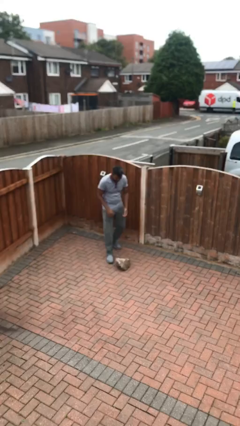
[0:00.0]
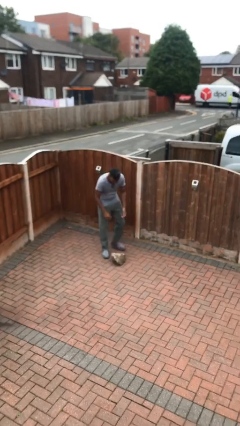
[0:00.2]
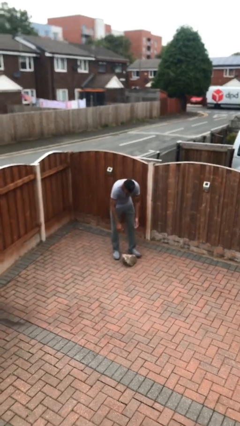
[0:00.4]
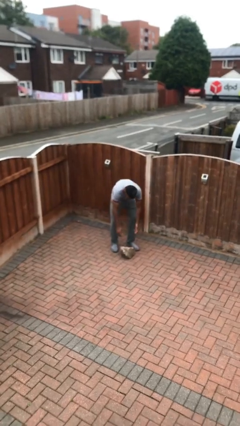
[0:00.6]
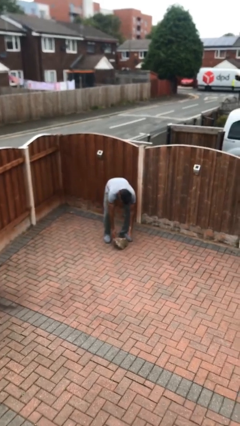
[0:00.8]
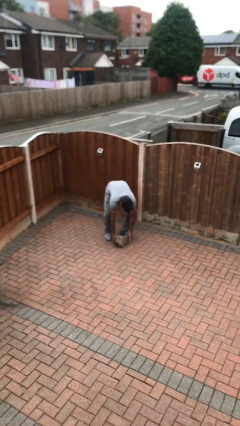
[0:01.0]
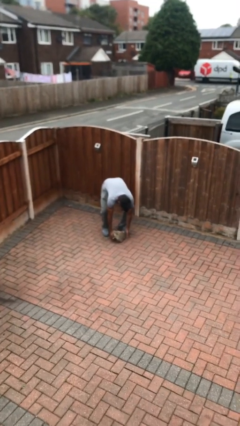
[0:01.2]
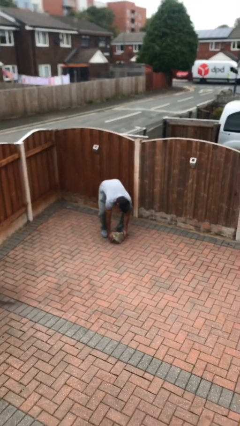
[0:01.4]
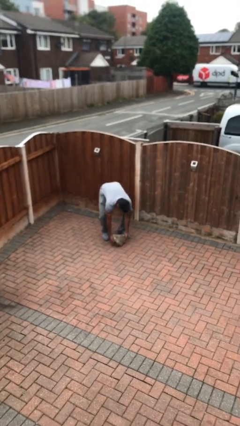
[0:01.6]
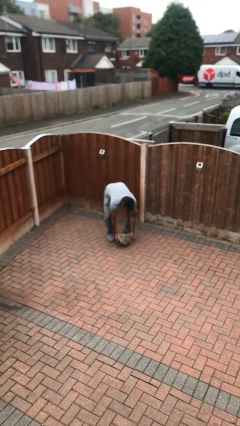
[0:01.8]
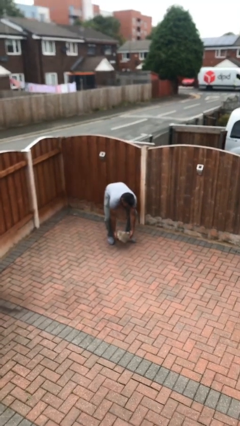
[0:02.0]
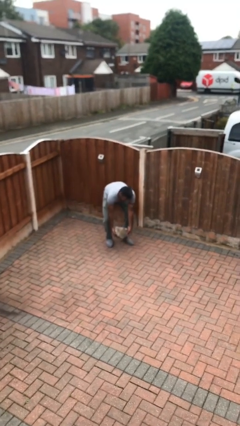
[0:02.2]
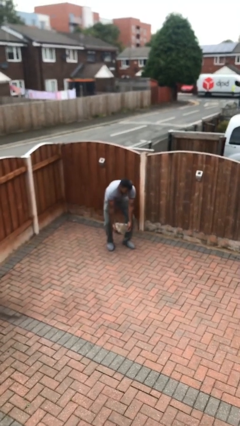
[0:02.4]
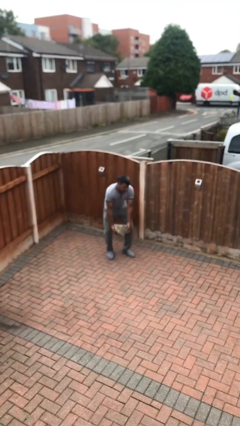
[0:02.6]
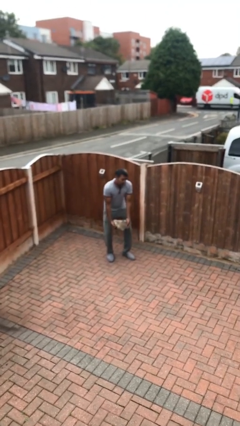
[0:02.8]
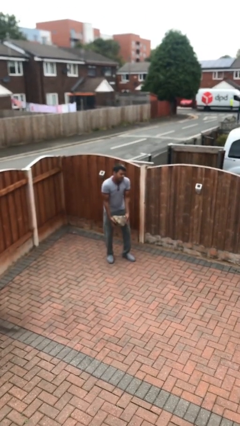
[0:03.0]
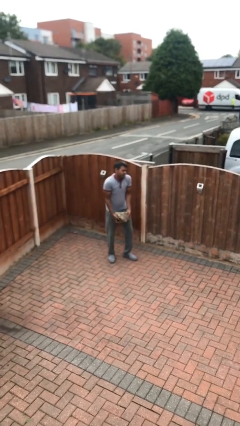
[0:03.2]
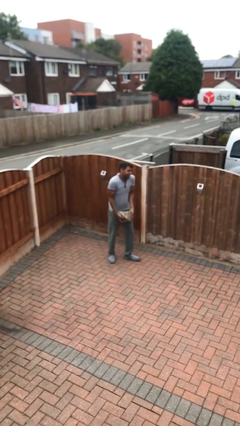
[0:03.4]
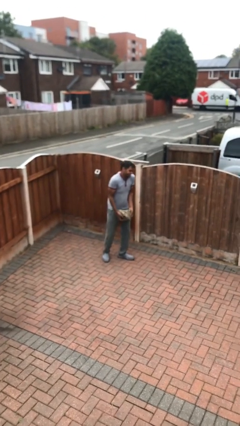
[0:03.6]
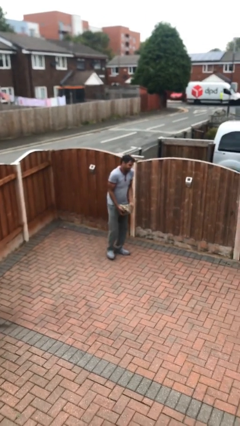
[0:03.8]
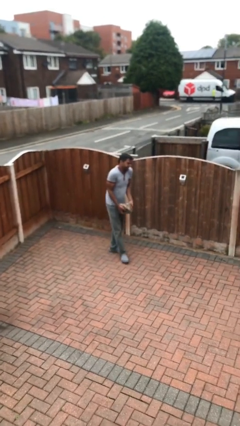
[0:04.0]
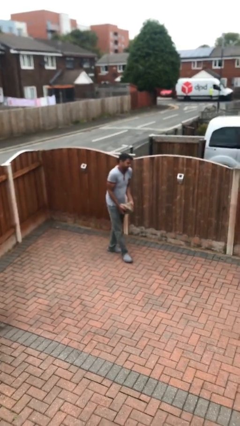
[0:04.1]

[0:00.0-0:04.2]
person picks up object from floor

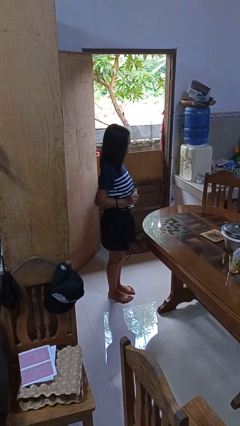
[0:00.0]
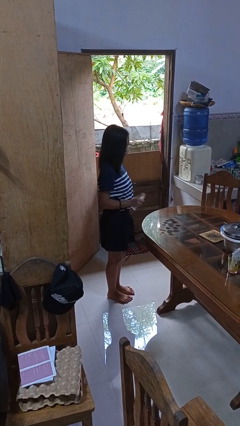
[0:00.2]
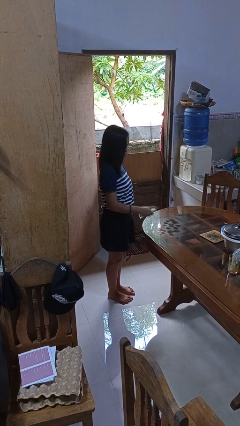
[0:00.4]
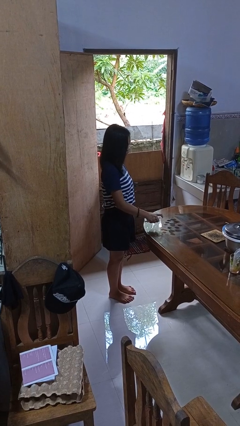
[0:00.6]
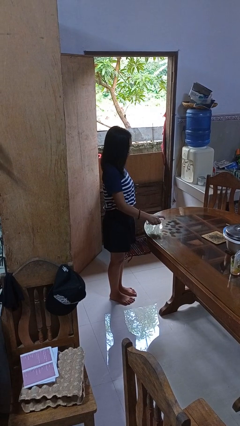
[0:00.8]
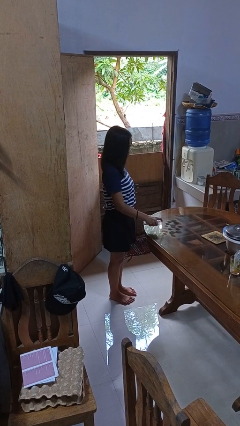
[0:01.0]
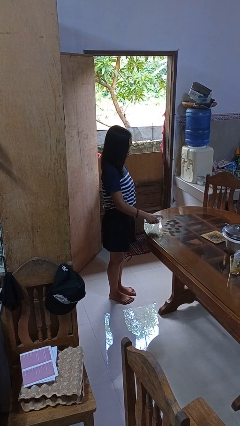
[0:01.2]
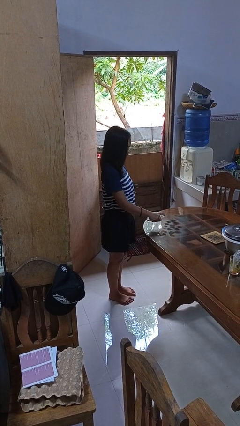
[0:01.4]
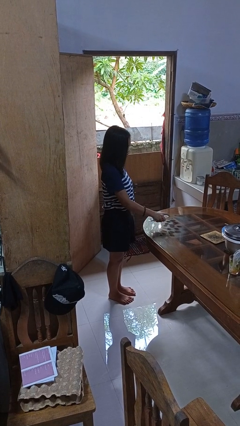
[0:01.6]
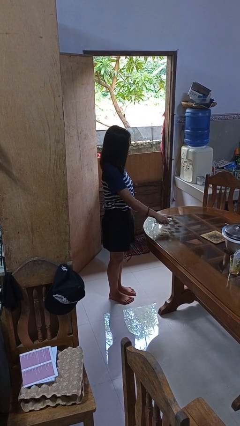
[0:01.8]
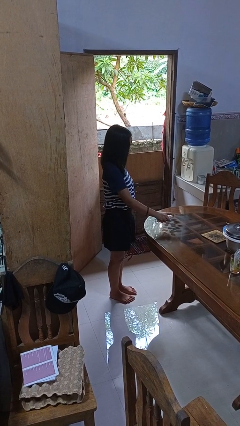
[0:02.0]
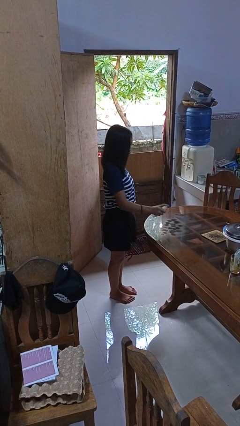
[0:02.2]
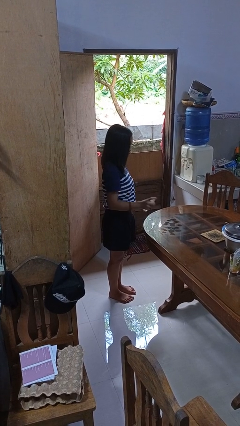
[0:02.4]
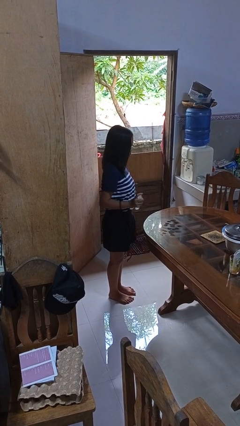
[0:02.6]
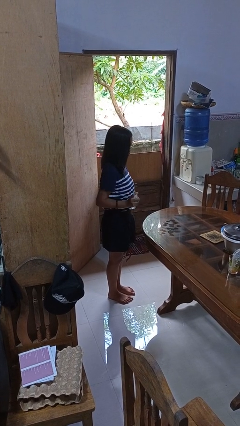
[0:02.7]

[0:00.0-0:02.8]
person sprays from bottle

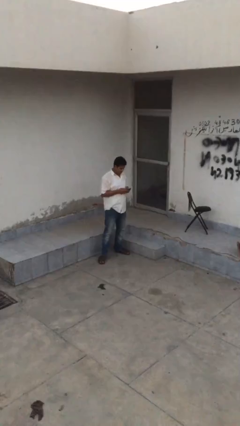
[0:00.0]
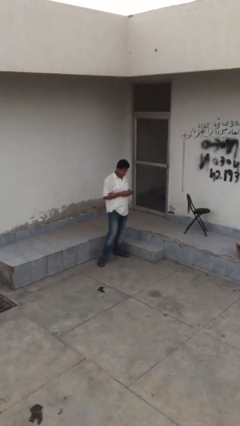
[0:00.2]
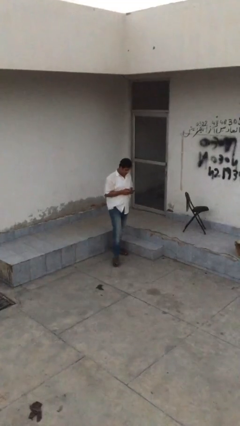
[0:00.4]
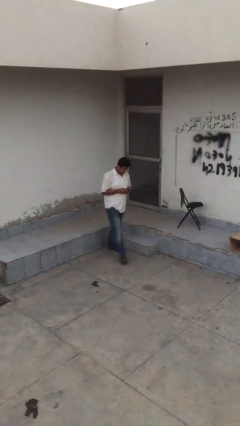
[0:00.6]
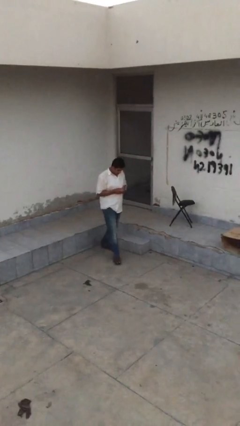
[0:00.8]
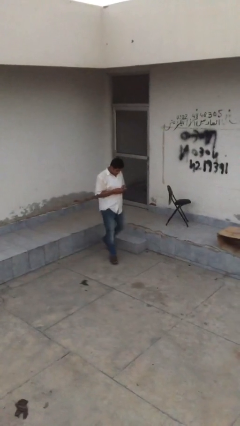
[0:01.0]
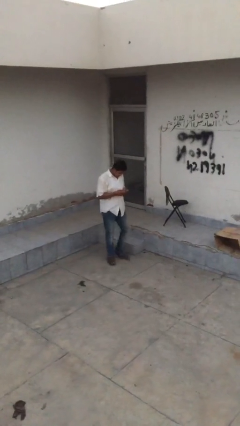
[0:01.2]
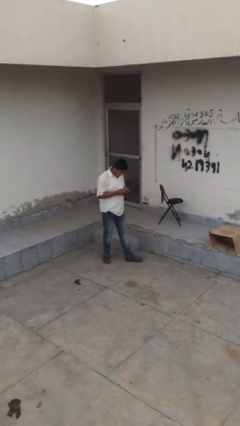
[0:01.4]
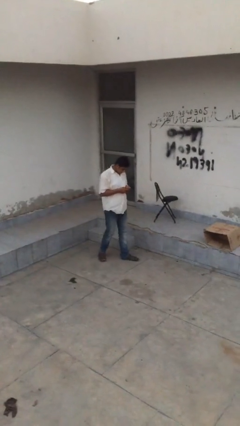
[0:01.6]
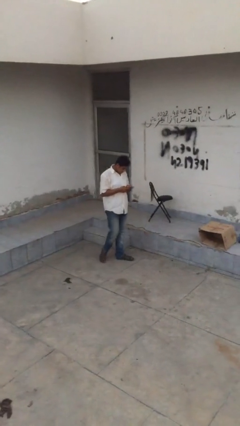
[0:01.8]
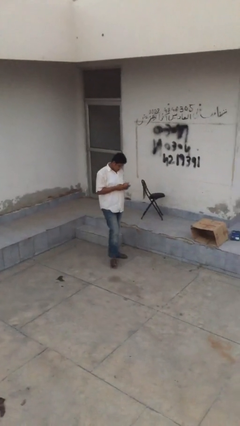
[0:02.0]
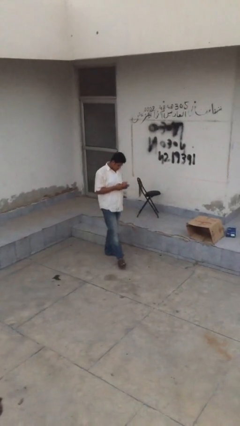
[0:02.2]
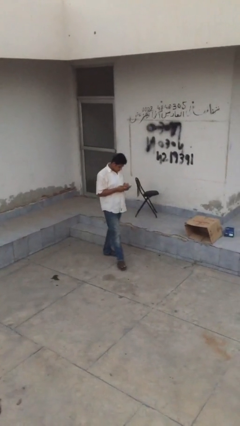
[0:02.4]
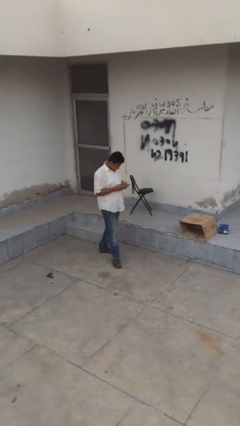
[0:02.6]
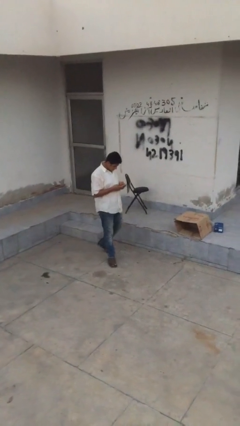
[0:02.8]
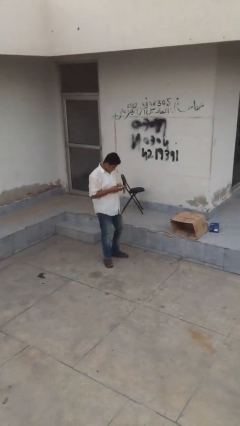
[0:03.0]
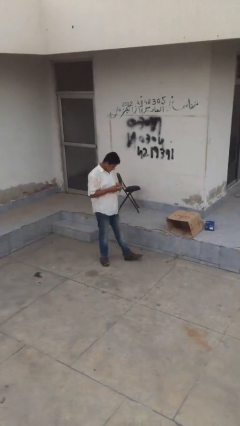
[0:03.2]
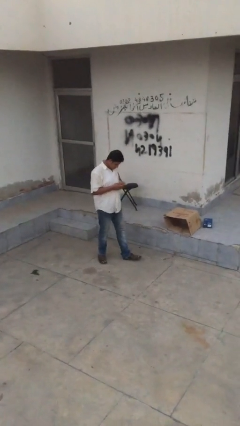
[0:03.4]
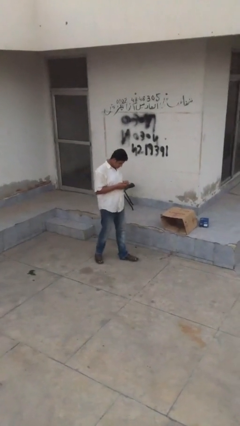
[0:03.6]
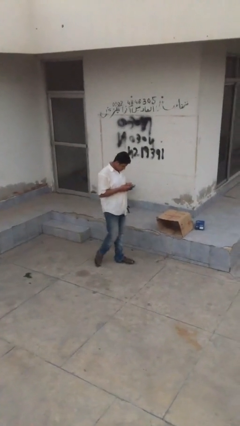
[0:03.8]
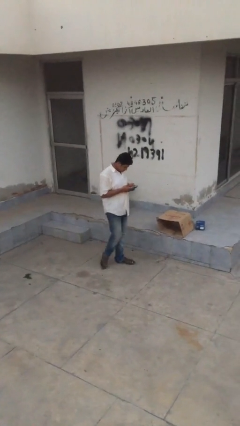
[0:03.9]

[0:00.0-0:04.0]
person texts on phone

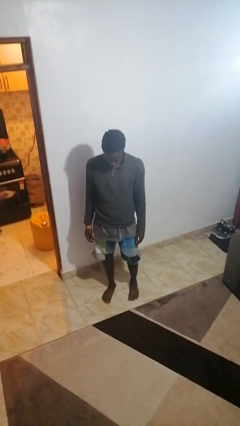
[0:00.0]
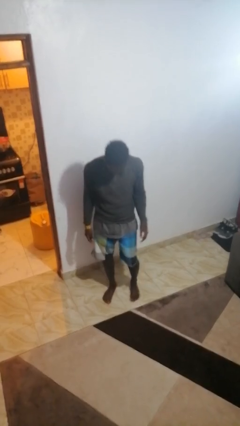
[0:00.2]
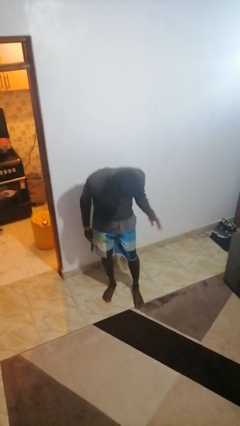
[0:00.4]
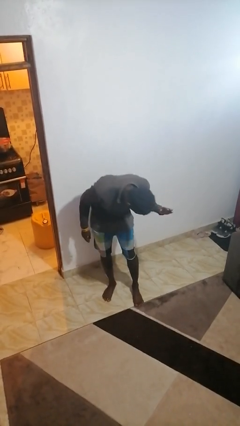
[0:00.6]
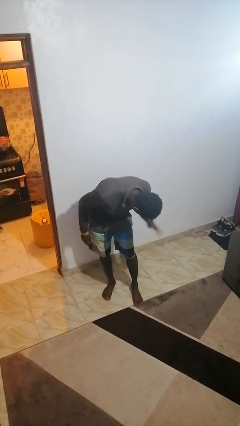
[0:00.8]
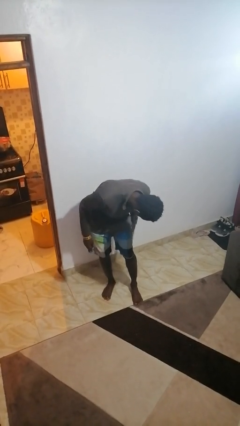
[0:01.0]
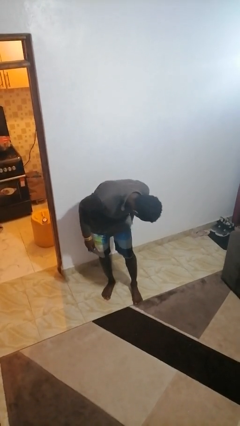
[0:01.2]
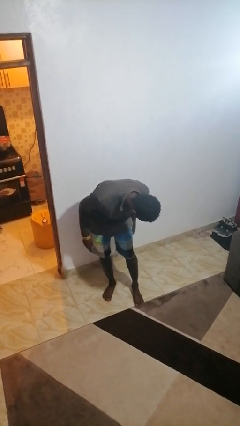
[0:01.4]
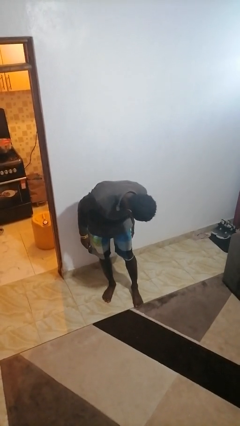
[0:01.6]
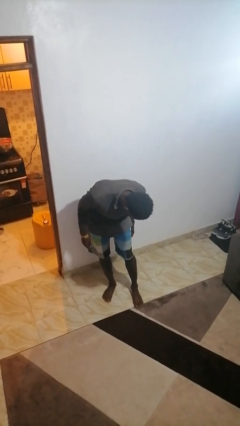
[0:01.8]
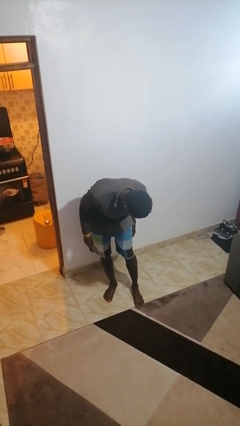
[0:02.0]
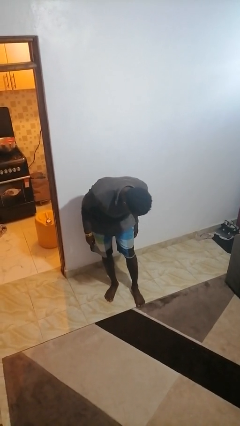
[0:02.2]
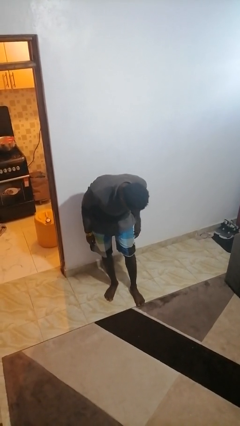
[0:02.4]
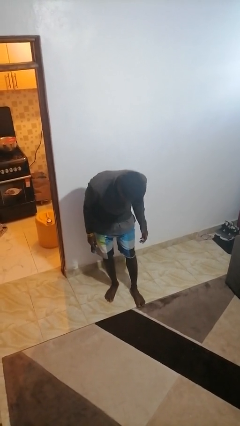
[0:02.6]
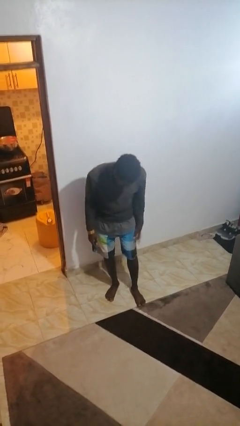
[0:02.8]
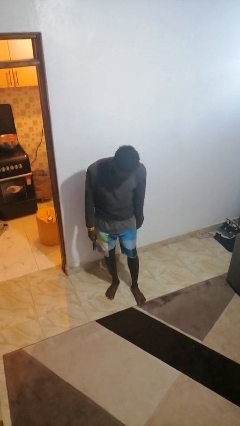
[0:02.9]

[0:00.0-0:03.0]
person swats bug

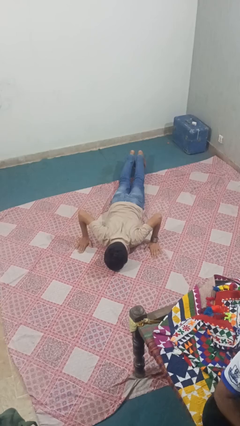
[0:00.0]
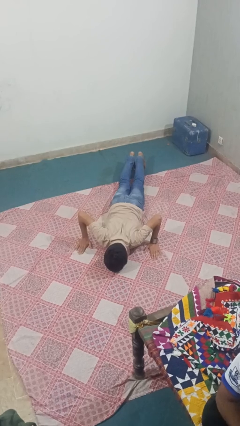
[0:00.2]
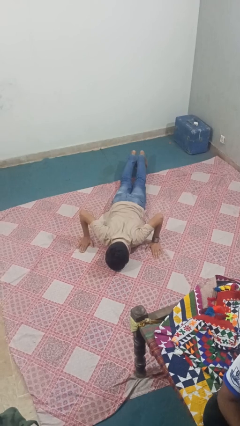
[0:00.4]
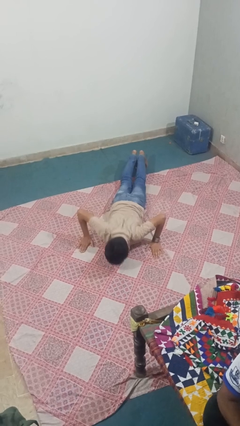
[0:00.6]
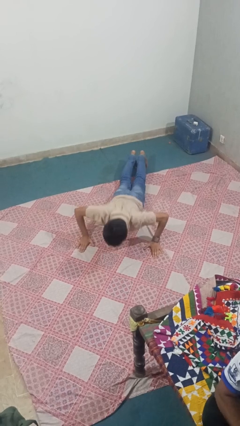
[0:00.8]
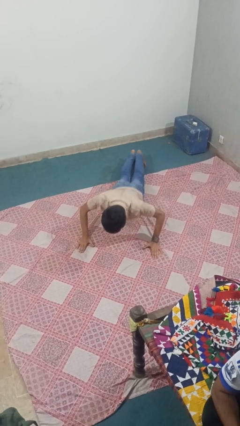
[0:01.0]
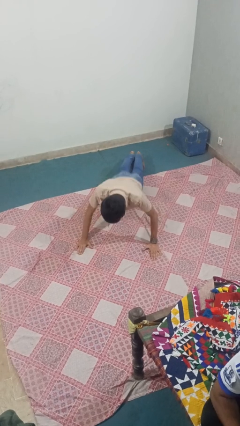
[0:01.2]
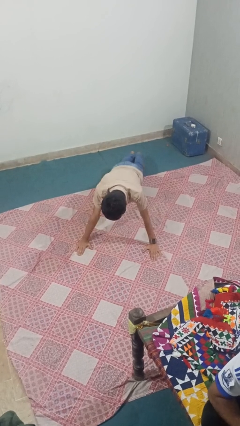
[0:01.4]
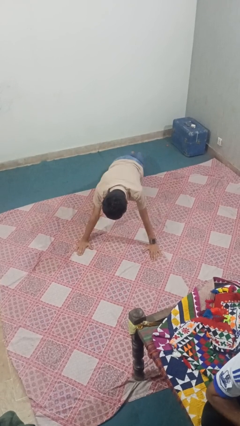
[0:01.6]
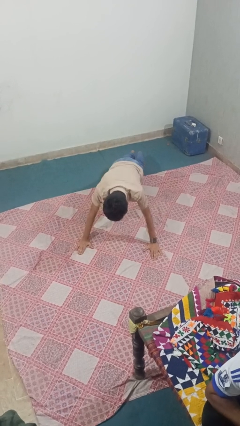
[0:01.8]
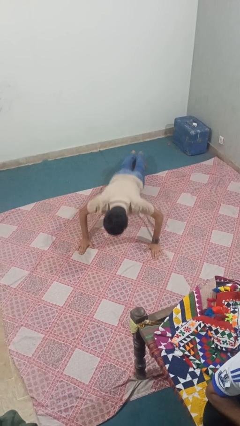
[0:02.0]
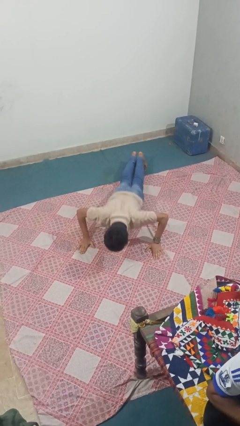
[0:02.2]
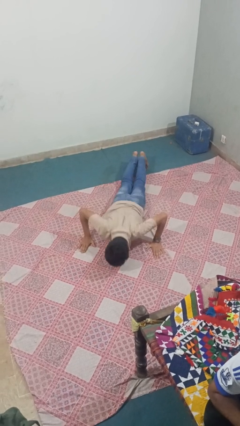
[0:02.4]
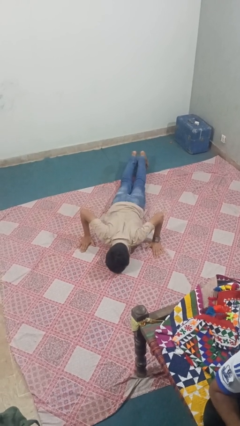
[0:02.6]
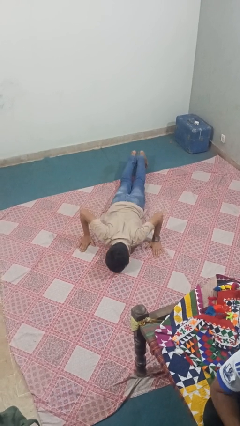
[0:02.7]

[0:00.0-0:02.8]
person exercises with pushup

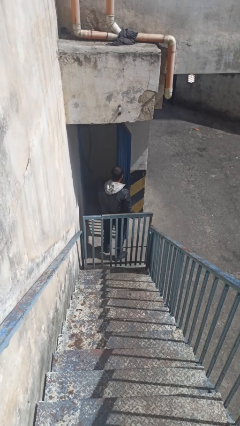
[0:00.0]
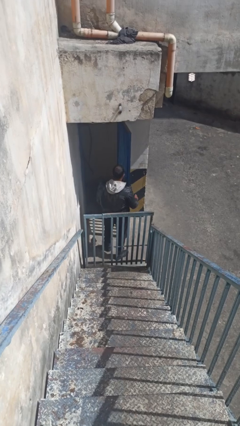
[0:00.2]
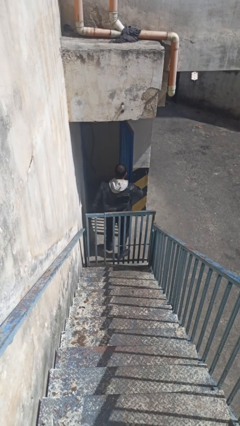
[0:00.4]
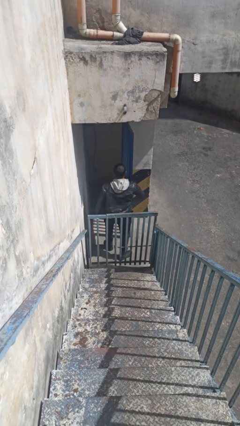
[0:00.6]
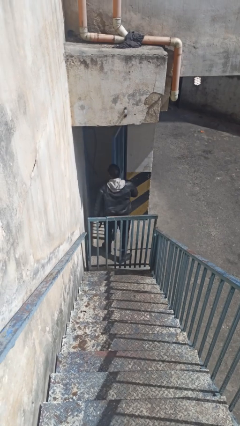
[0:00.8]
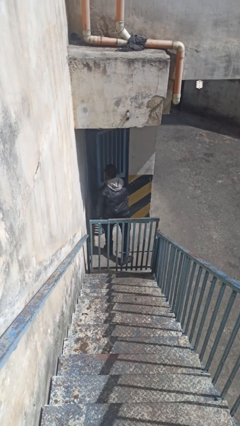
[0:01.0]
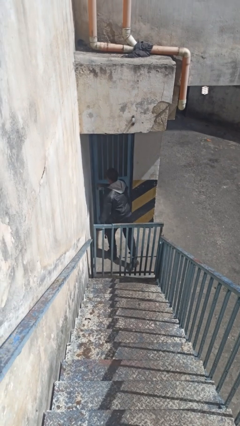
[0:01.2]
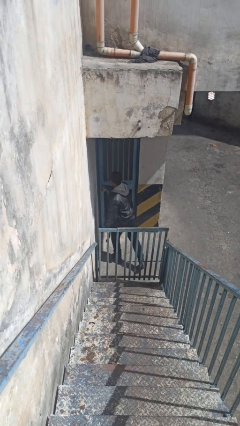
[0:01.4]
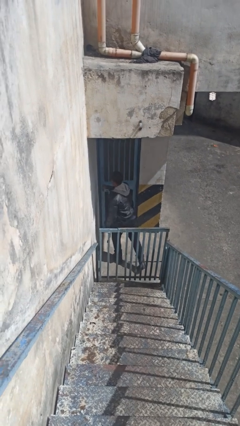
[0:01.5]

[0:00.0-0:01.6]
person closes facility door
